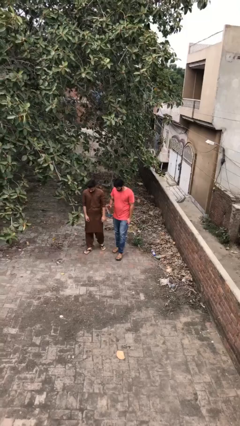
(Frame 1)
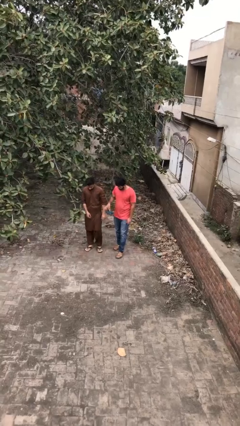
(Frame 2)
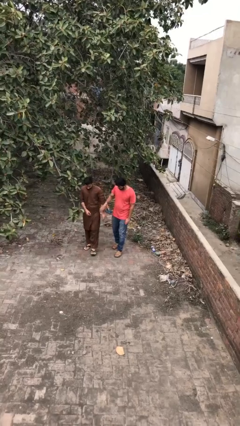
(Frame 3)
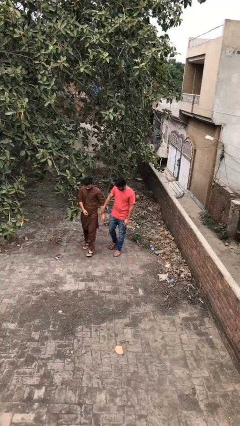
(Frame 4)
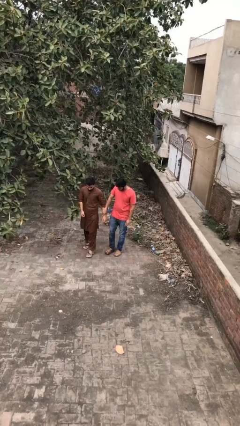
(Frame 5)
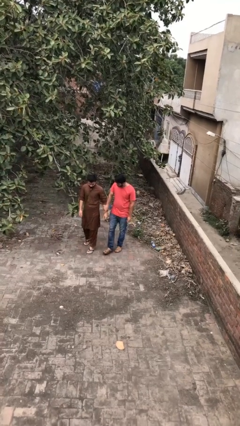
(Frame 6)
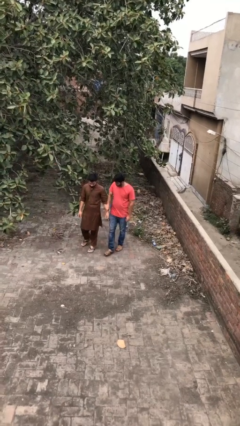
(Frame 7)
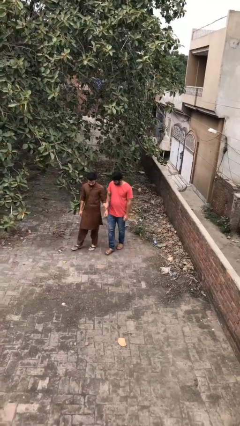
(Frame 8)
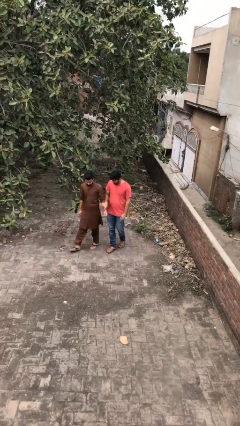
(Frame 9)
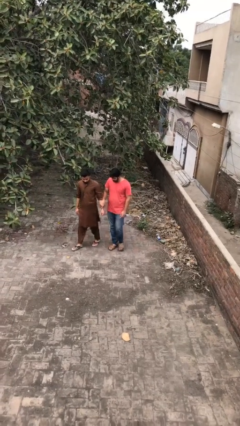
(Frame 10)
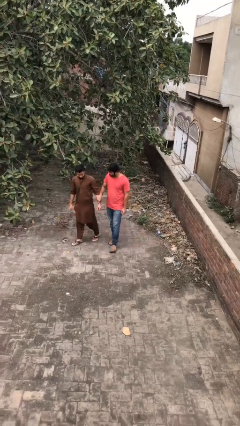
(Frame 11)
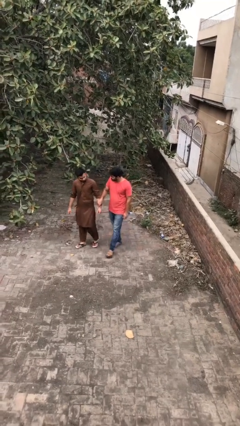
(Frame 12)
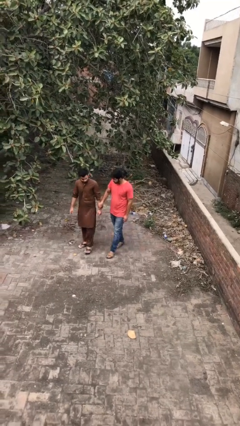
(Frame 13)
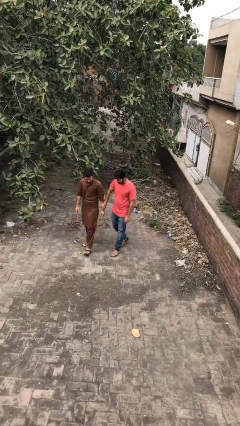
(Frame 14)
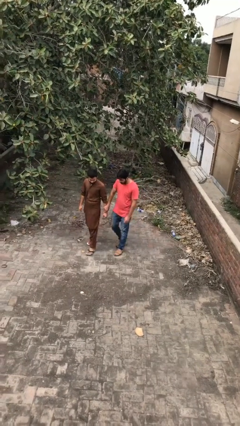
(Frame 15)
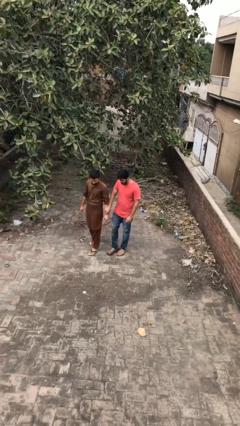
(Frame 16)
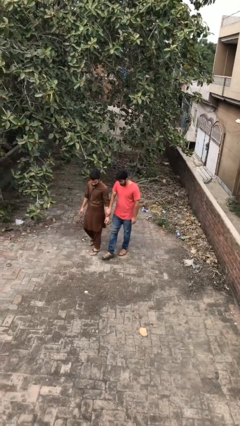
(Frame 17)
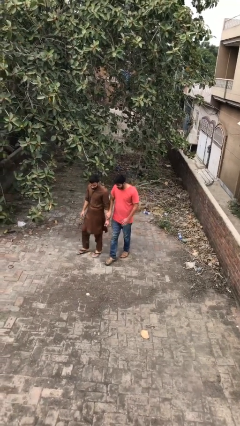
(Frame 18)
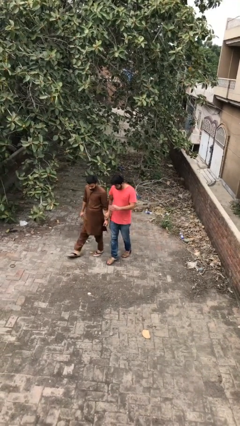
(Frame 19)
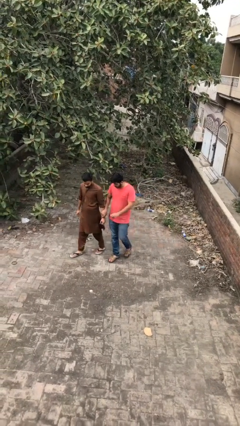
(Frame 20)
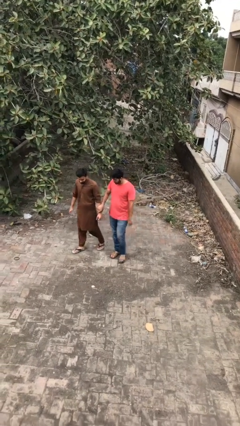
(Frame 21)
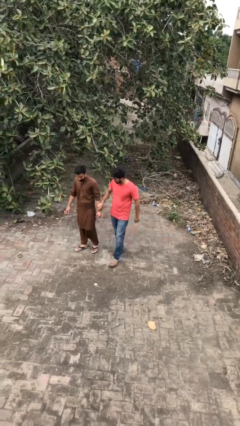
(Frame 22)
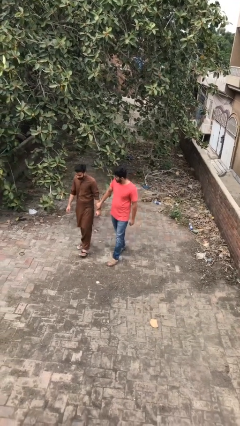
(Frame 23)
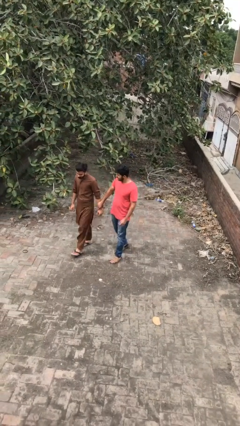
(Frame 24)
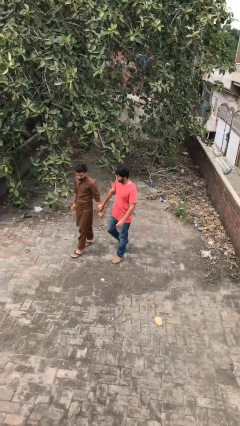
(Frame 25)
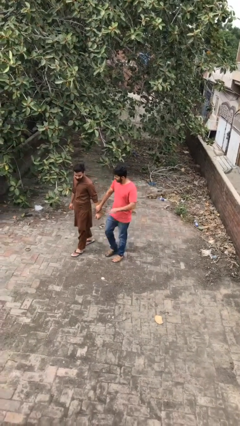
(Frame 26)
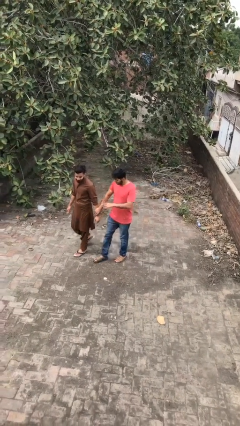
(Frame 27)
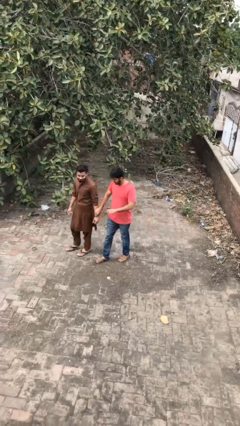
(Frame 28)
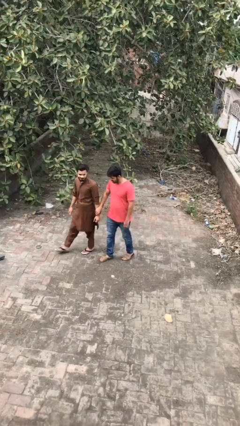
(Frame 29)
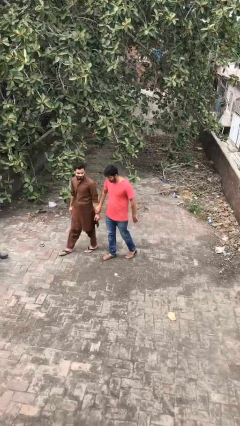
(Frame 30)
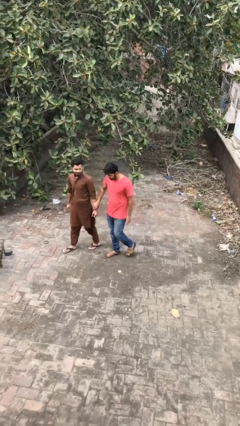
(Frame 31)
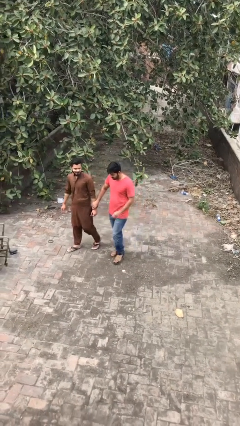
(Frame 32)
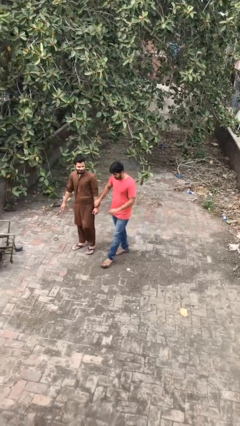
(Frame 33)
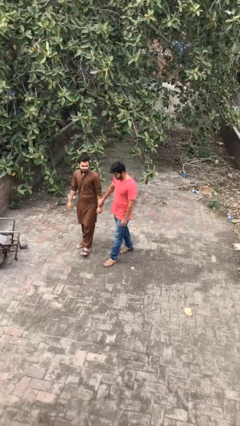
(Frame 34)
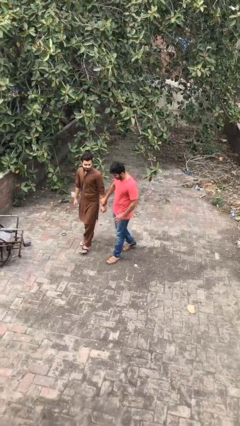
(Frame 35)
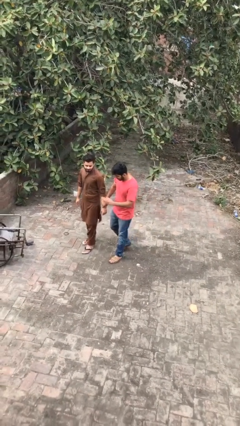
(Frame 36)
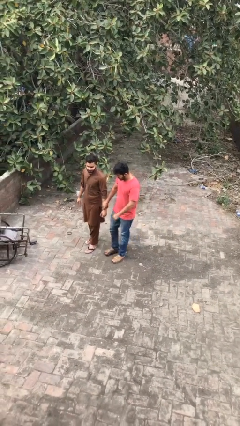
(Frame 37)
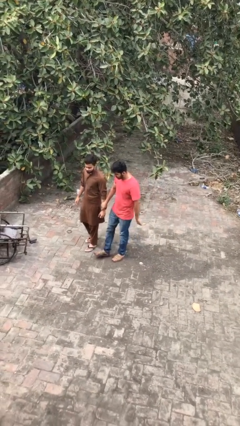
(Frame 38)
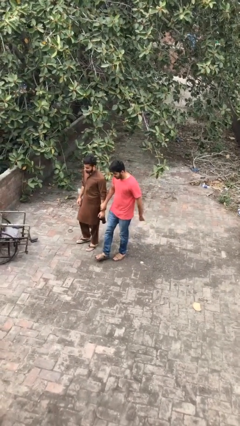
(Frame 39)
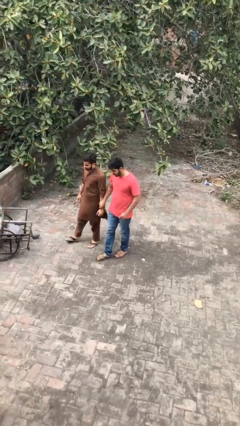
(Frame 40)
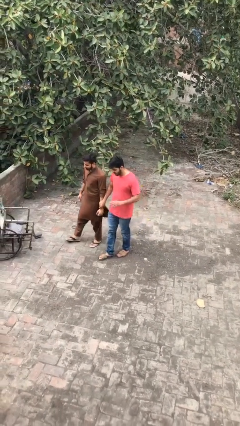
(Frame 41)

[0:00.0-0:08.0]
person holds hand

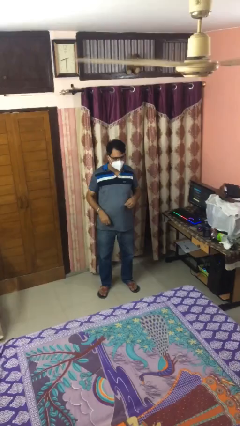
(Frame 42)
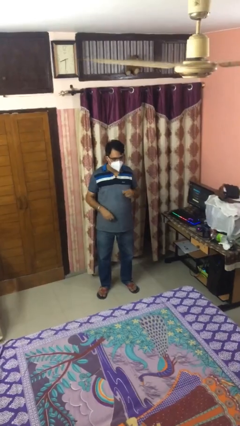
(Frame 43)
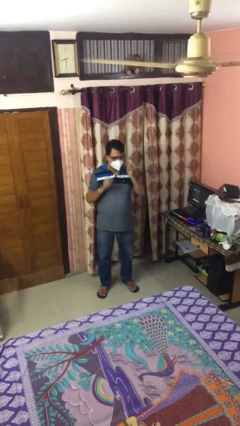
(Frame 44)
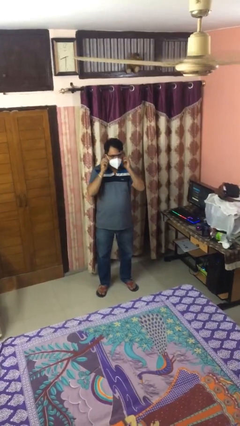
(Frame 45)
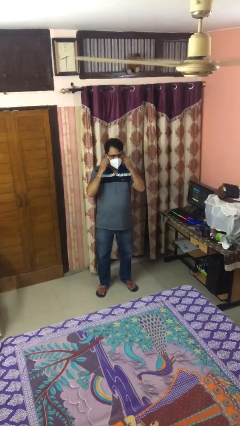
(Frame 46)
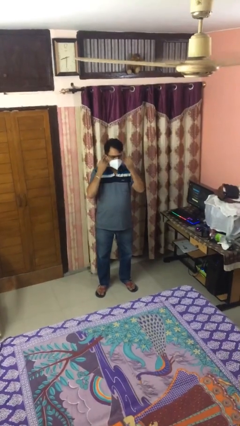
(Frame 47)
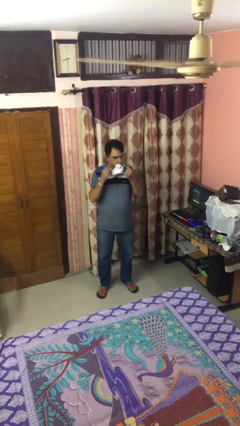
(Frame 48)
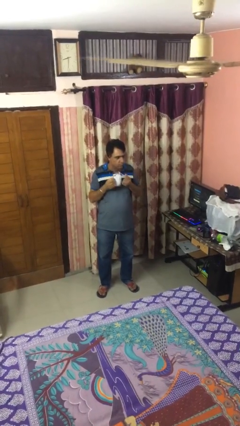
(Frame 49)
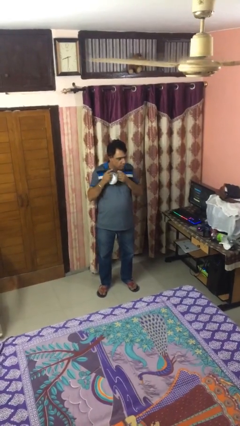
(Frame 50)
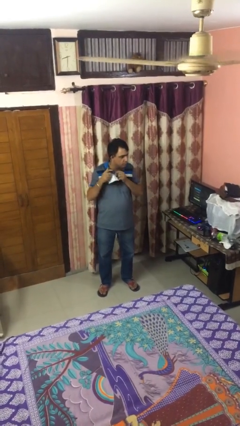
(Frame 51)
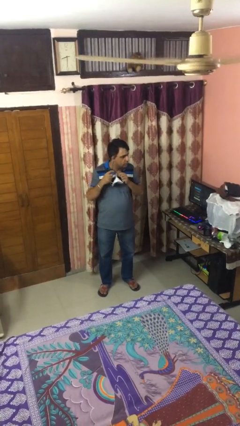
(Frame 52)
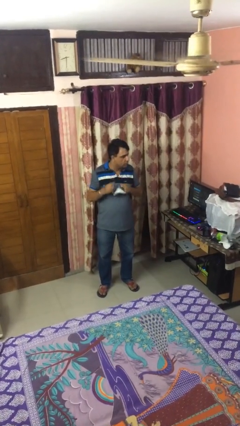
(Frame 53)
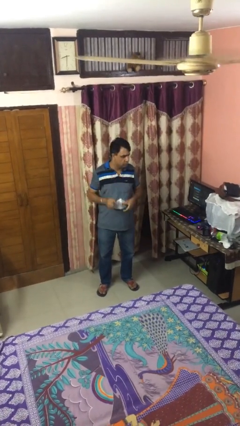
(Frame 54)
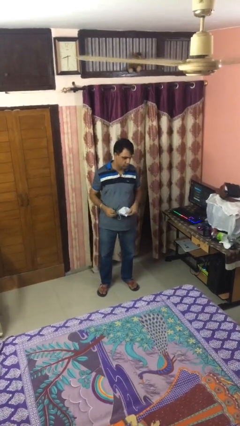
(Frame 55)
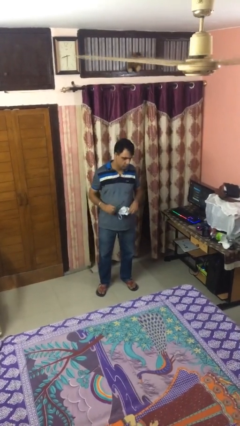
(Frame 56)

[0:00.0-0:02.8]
person takes off facemask

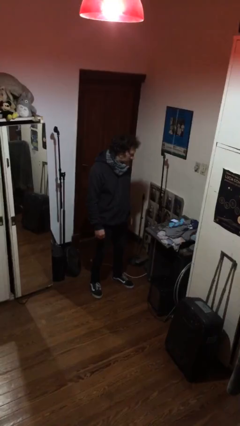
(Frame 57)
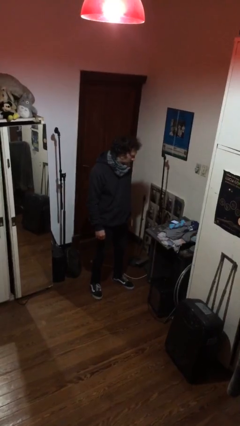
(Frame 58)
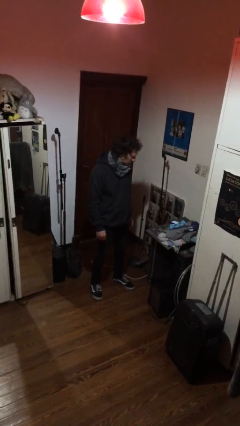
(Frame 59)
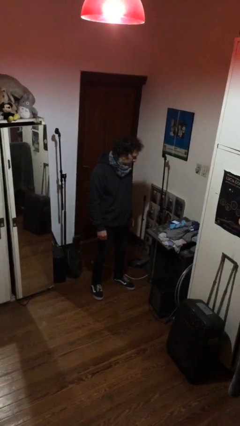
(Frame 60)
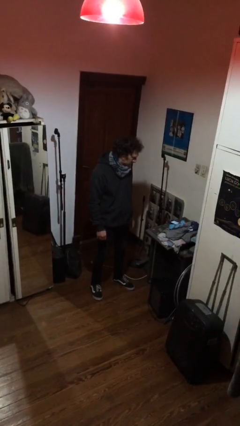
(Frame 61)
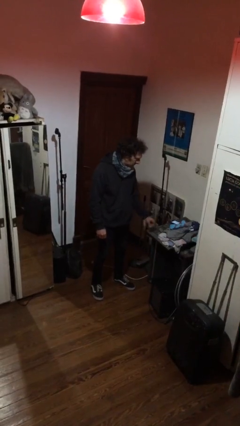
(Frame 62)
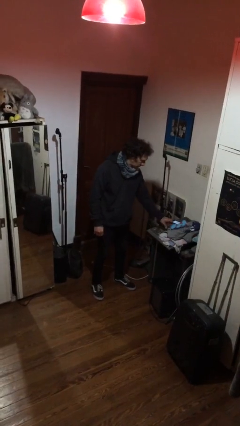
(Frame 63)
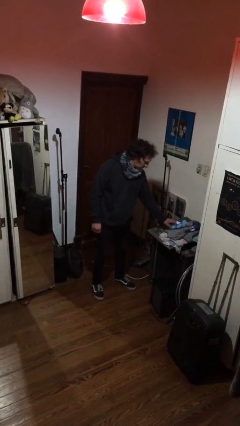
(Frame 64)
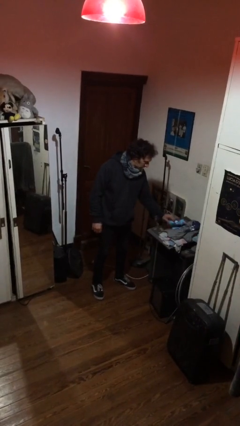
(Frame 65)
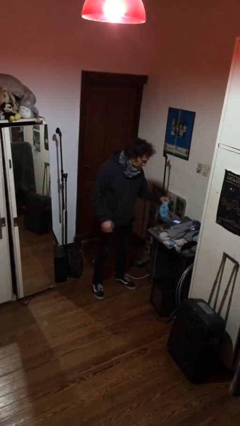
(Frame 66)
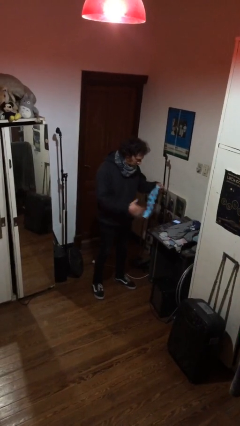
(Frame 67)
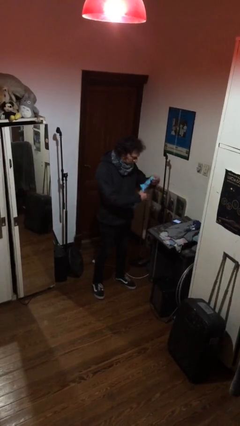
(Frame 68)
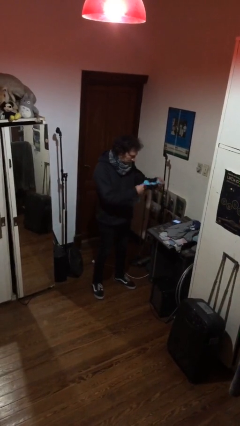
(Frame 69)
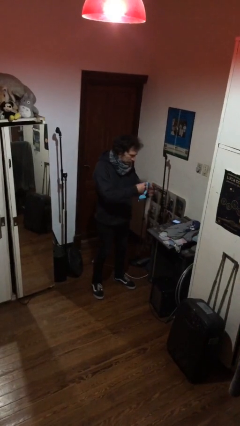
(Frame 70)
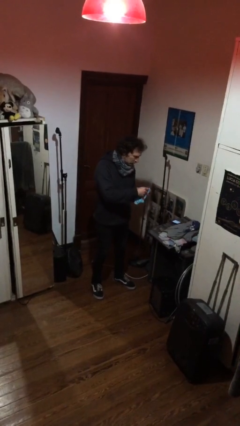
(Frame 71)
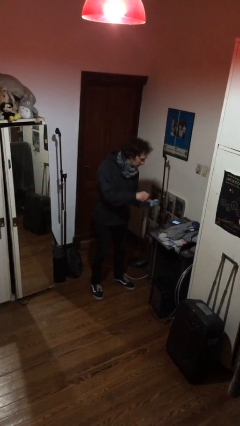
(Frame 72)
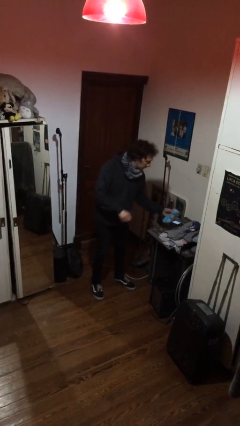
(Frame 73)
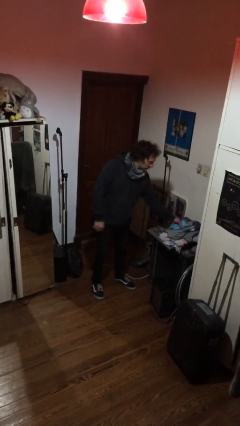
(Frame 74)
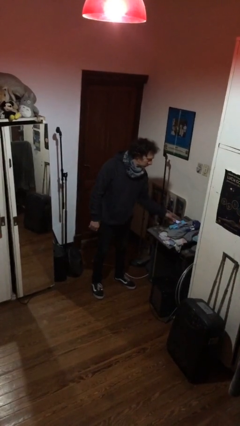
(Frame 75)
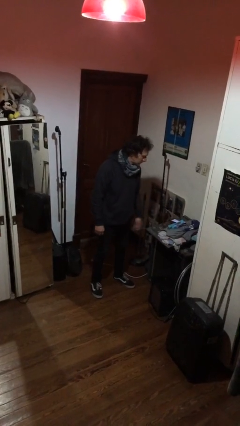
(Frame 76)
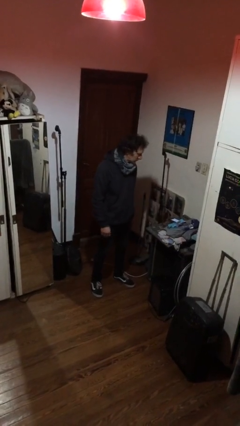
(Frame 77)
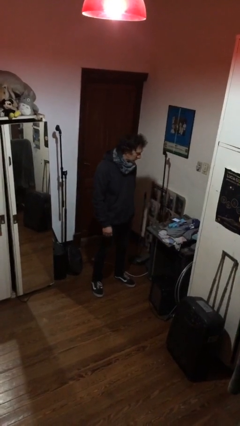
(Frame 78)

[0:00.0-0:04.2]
person folds socks

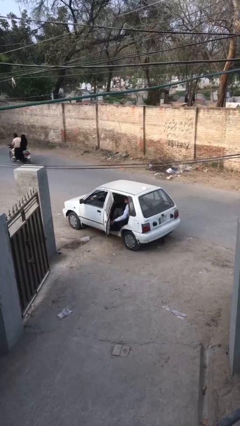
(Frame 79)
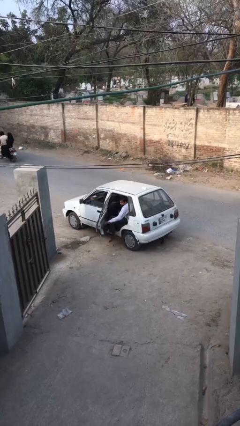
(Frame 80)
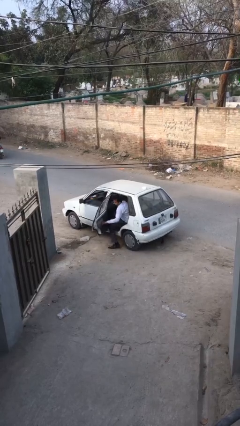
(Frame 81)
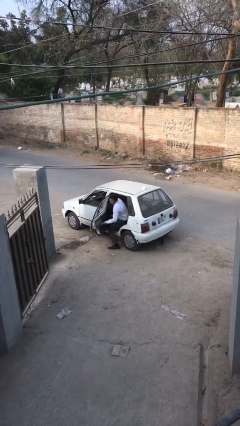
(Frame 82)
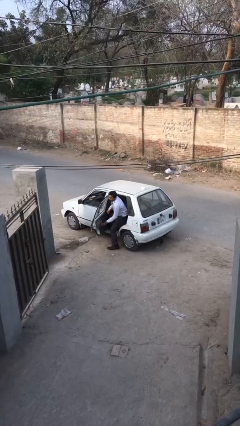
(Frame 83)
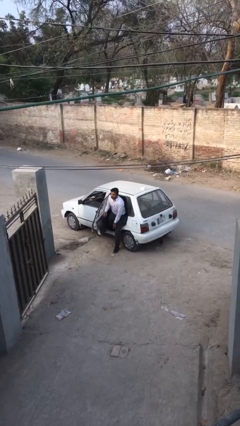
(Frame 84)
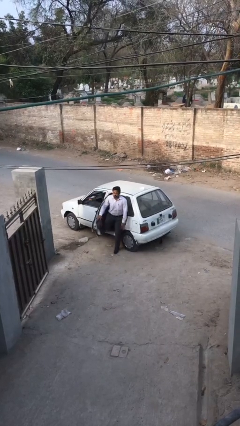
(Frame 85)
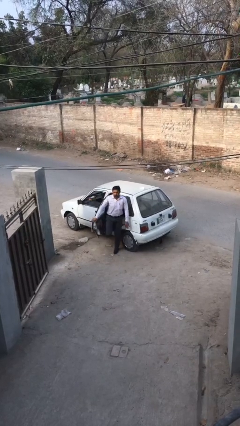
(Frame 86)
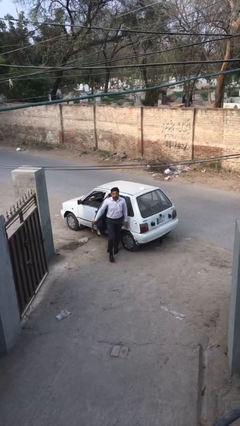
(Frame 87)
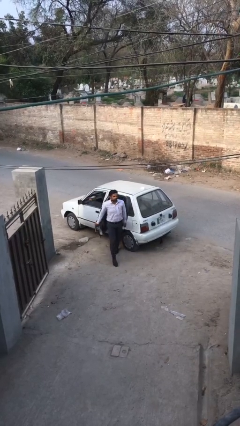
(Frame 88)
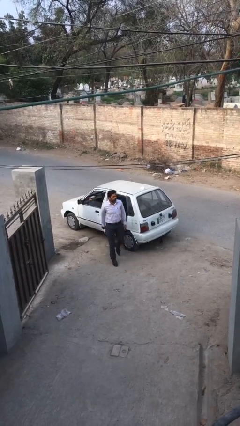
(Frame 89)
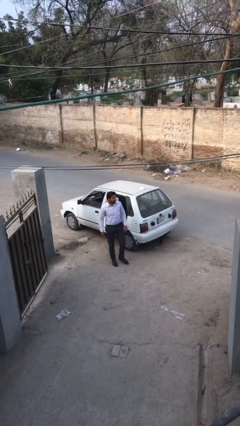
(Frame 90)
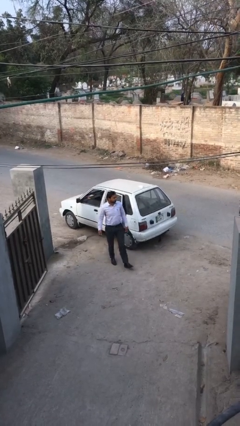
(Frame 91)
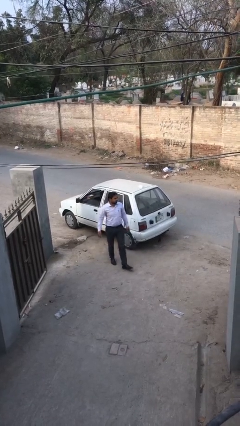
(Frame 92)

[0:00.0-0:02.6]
car drops off person

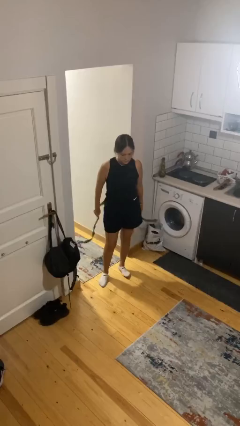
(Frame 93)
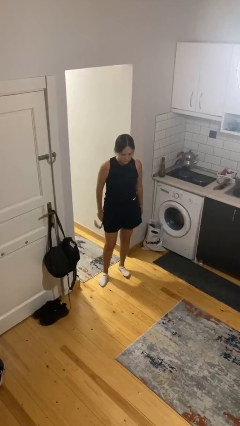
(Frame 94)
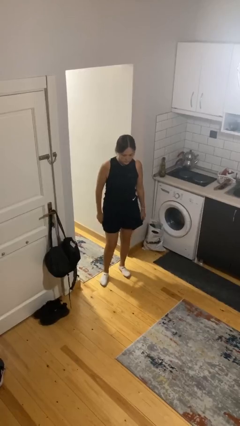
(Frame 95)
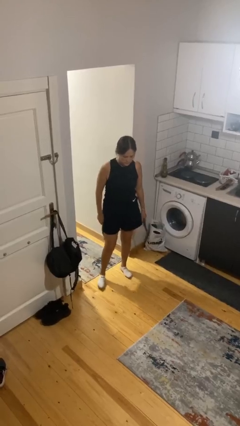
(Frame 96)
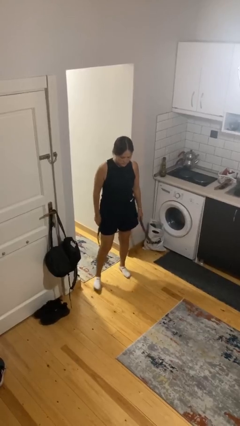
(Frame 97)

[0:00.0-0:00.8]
person takes off belt
